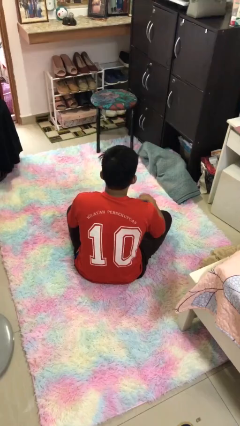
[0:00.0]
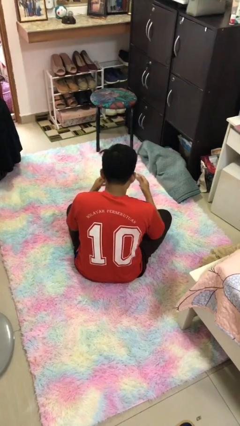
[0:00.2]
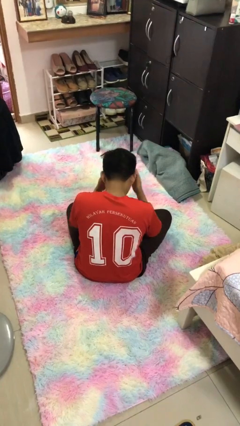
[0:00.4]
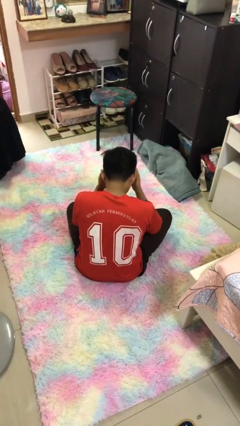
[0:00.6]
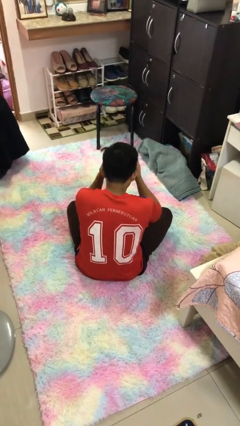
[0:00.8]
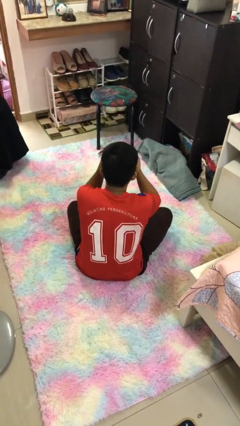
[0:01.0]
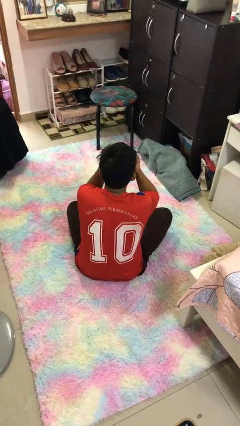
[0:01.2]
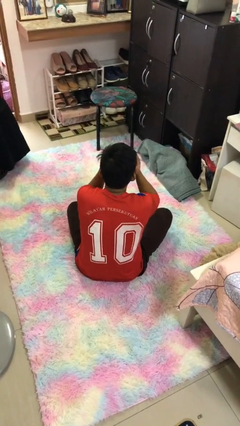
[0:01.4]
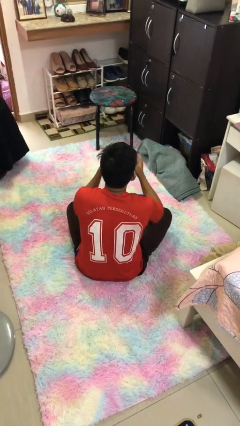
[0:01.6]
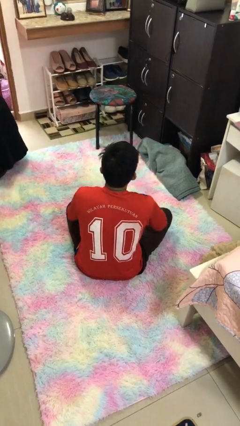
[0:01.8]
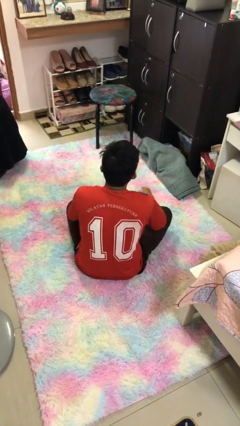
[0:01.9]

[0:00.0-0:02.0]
person covers face with hands

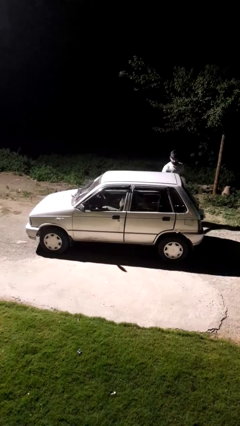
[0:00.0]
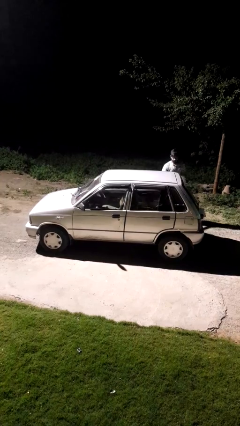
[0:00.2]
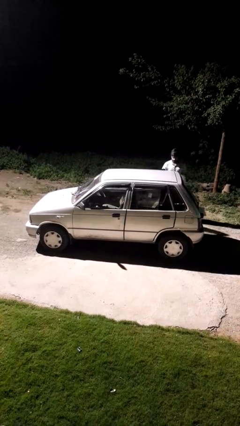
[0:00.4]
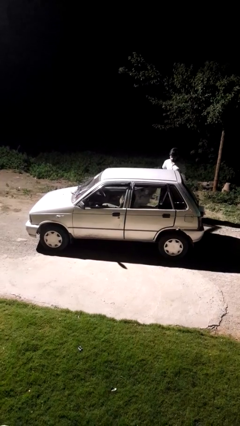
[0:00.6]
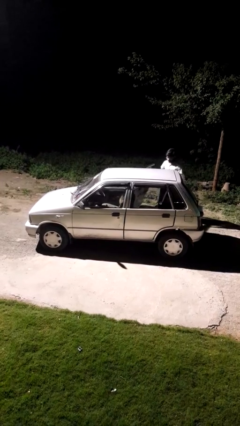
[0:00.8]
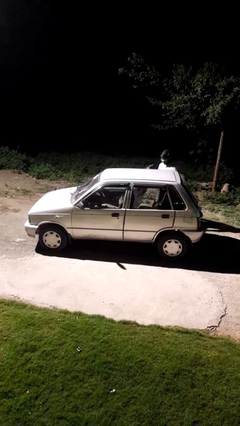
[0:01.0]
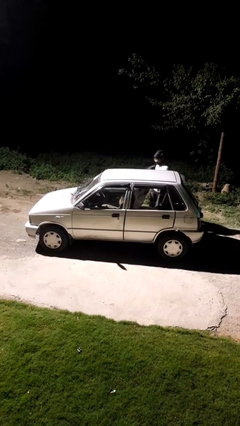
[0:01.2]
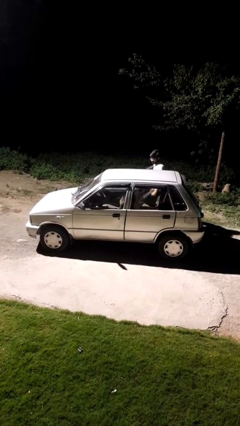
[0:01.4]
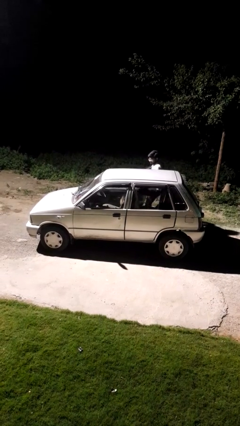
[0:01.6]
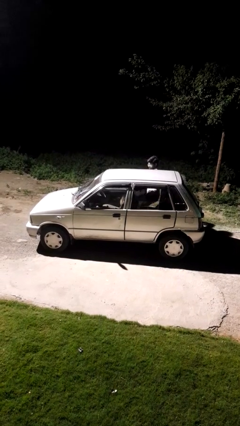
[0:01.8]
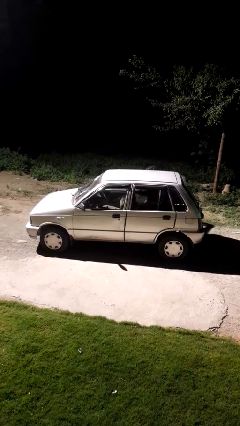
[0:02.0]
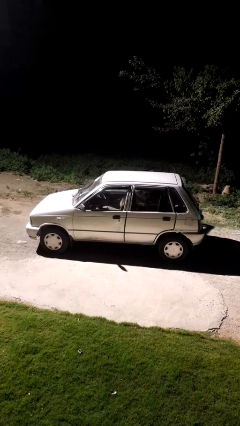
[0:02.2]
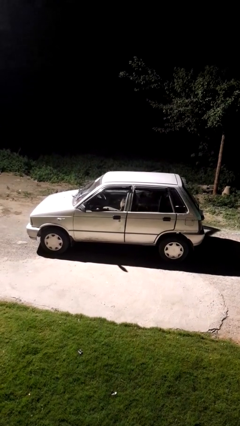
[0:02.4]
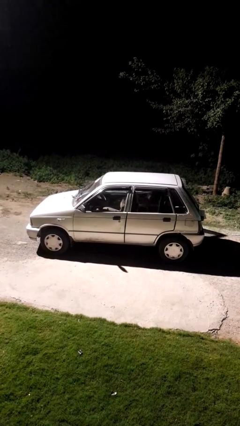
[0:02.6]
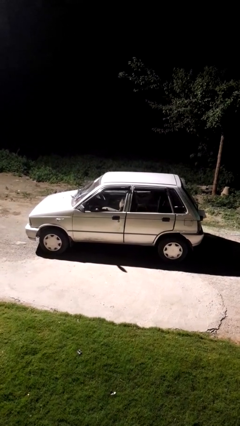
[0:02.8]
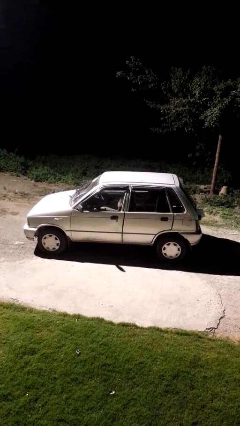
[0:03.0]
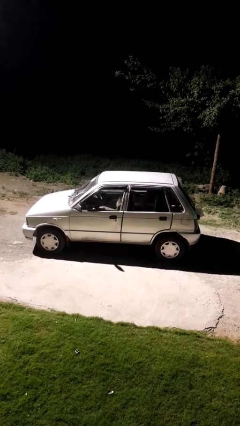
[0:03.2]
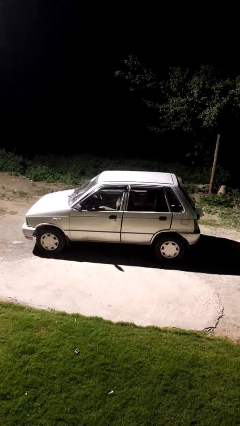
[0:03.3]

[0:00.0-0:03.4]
car picks up person

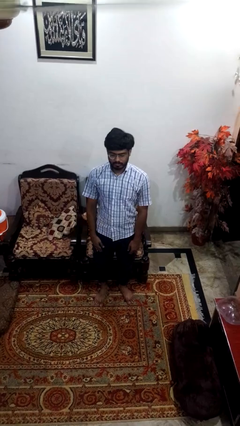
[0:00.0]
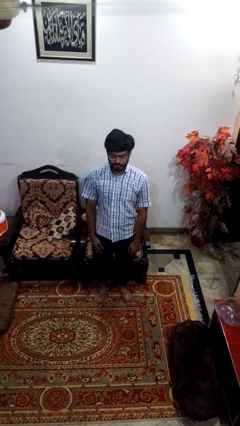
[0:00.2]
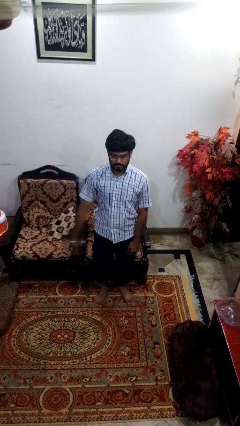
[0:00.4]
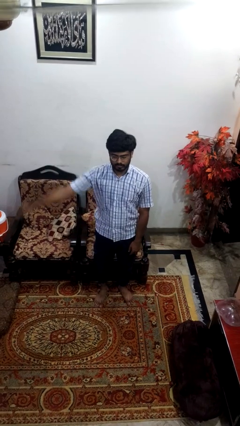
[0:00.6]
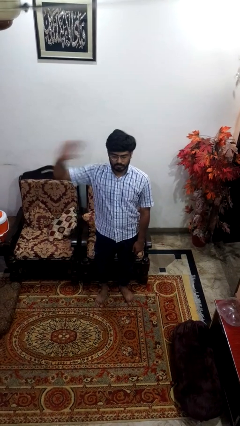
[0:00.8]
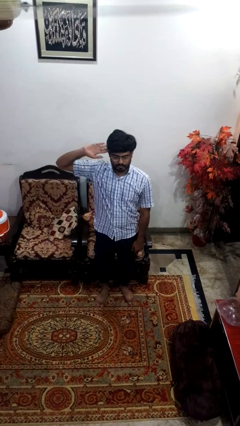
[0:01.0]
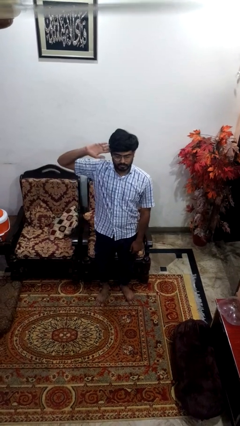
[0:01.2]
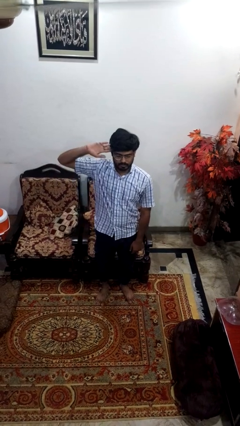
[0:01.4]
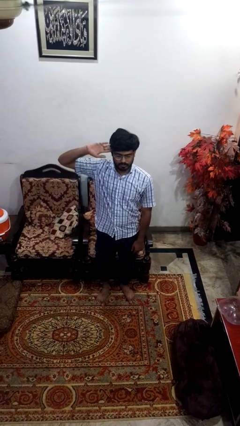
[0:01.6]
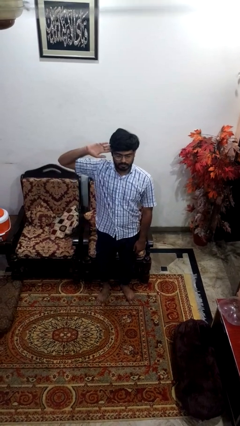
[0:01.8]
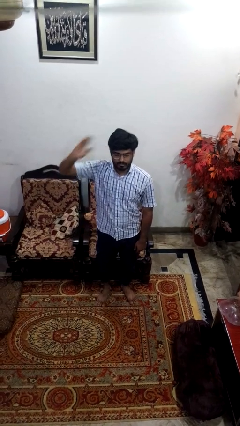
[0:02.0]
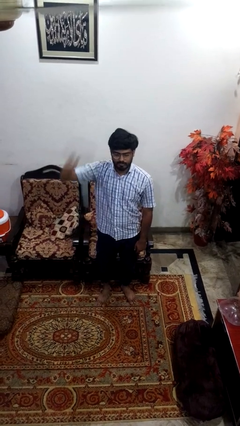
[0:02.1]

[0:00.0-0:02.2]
person salutes

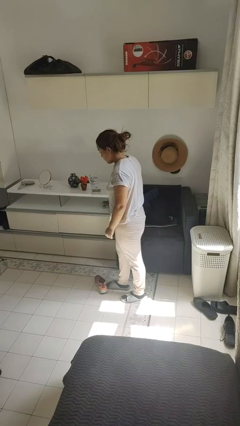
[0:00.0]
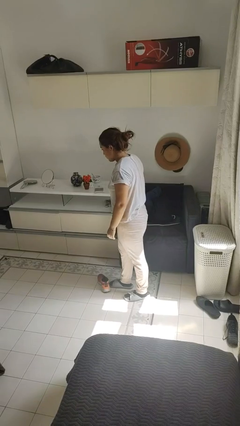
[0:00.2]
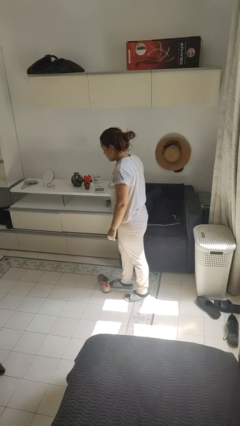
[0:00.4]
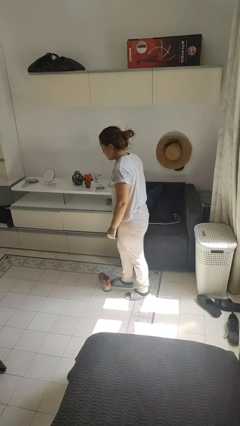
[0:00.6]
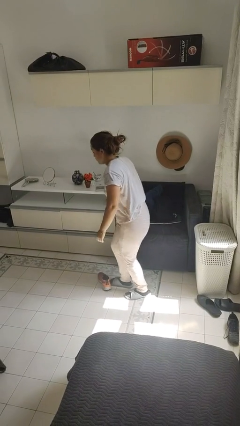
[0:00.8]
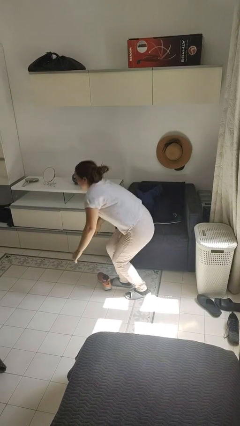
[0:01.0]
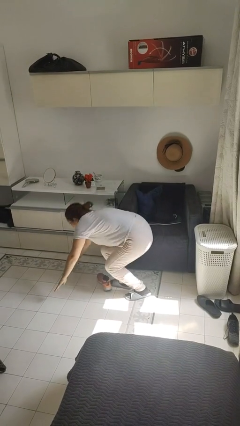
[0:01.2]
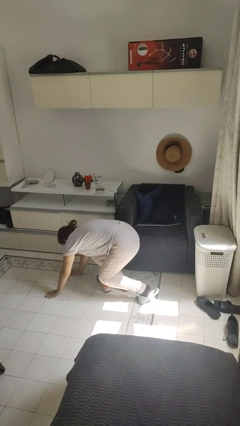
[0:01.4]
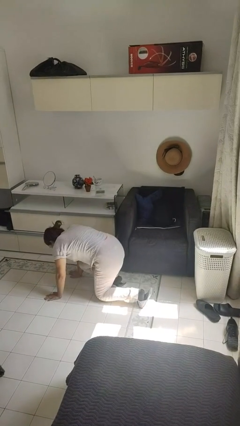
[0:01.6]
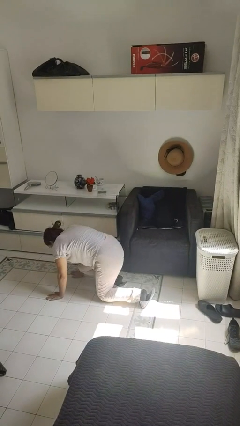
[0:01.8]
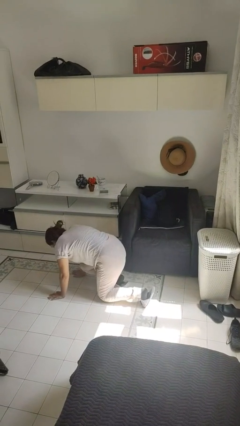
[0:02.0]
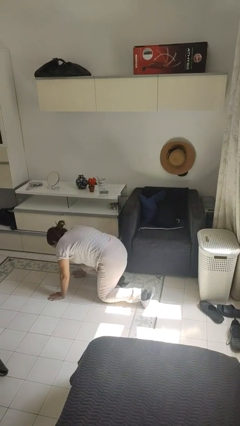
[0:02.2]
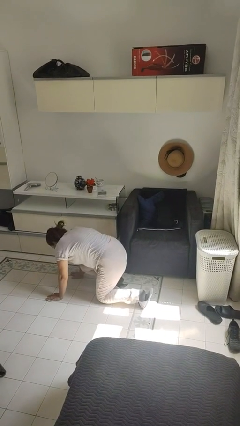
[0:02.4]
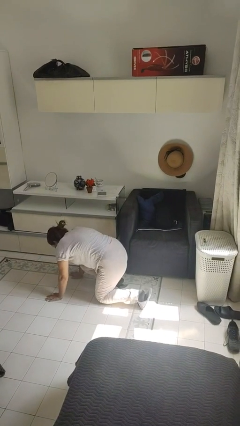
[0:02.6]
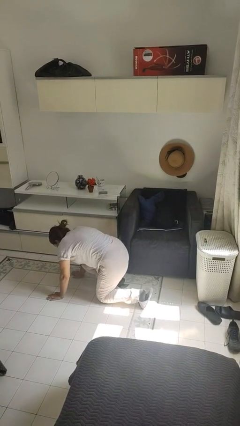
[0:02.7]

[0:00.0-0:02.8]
person trips on object on floor

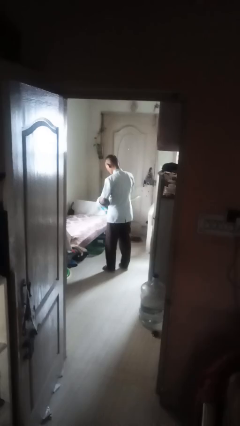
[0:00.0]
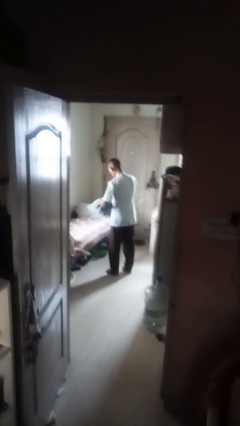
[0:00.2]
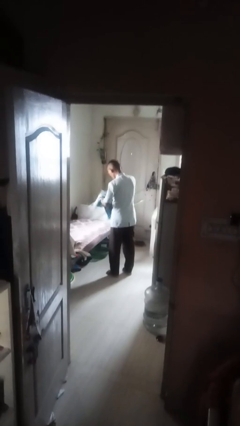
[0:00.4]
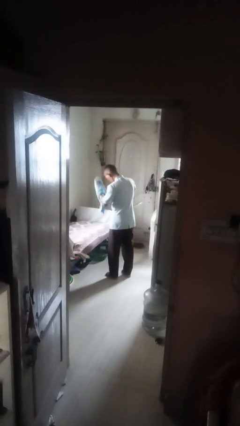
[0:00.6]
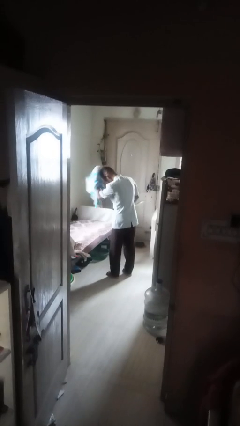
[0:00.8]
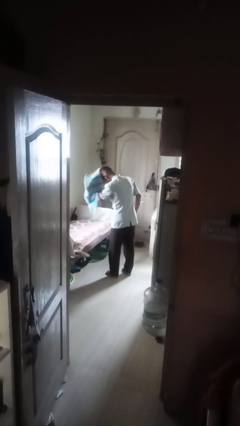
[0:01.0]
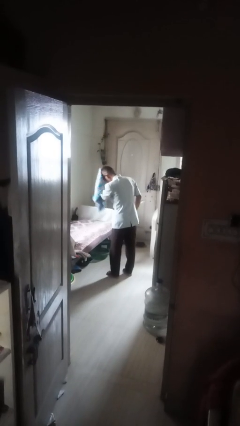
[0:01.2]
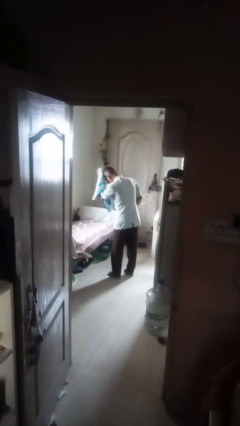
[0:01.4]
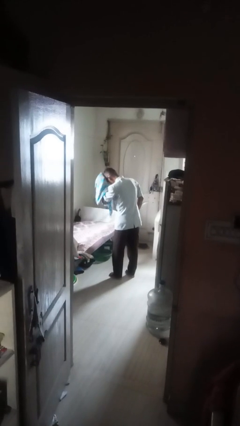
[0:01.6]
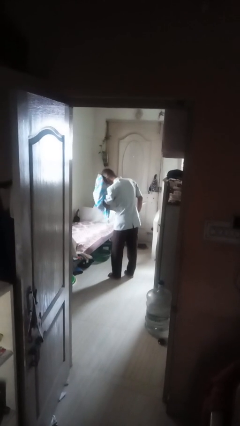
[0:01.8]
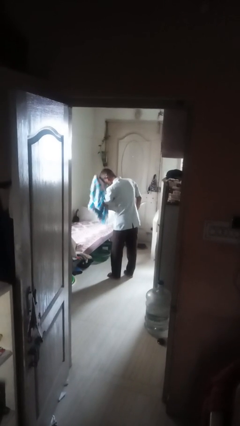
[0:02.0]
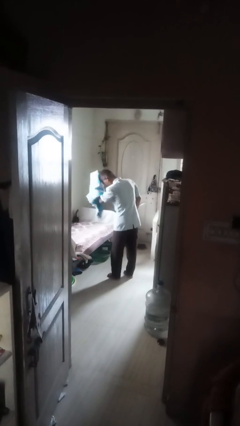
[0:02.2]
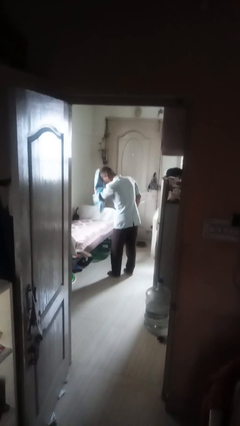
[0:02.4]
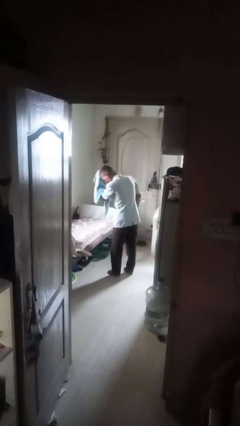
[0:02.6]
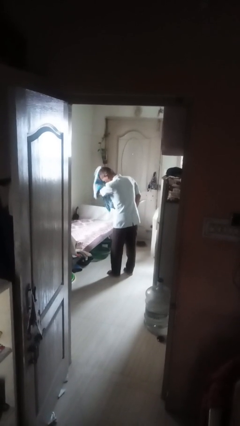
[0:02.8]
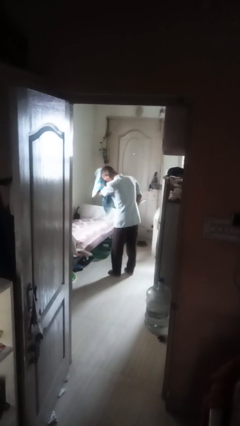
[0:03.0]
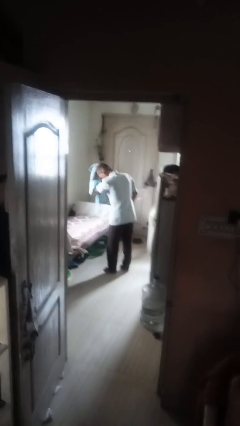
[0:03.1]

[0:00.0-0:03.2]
person dries hair with towel

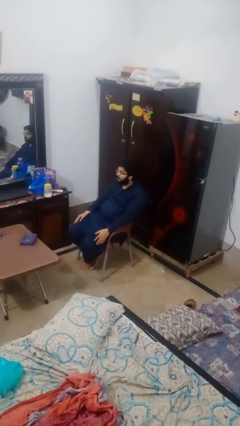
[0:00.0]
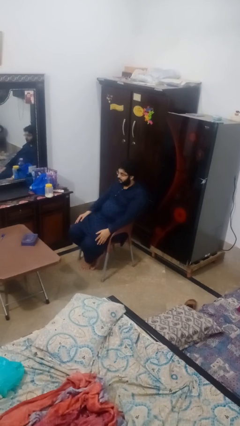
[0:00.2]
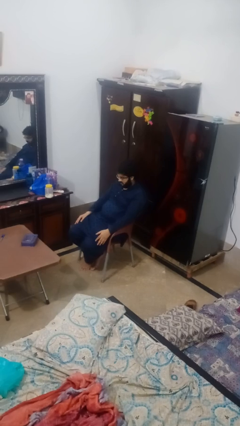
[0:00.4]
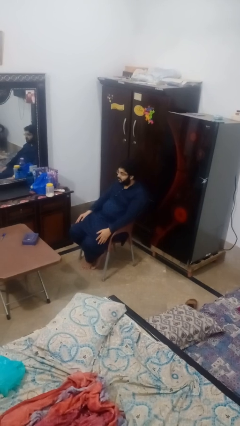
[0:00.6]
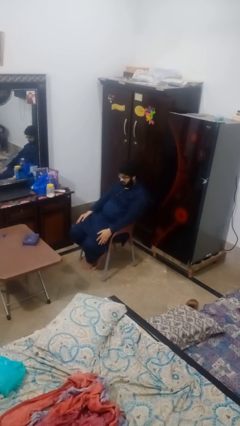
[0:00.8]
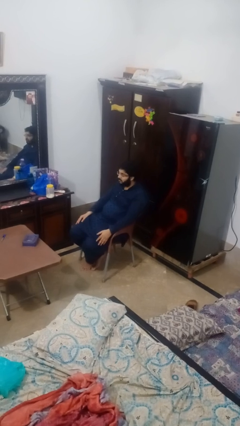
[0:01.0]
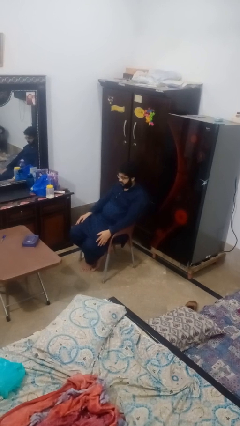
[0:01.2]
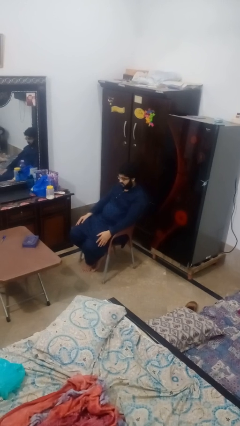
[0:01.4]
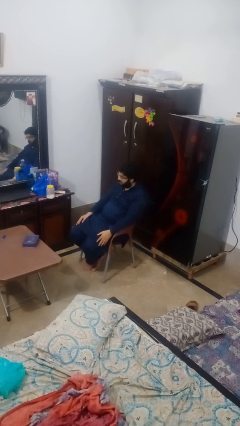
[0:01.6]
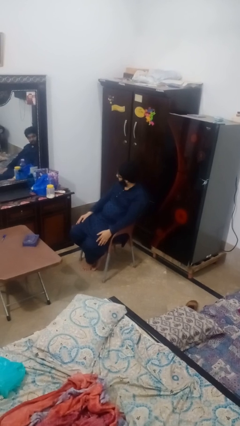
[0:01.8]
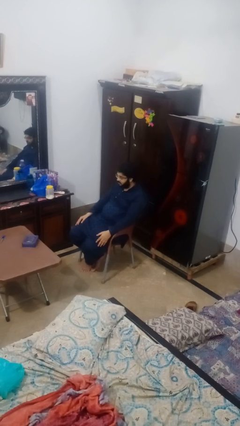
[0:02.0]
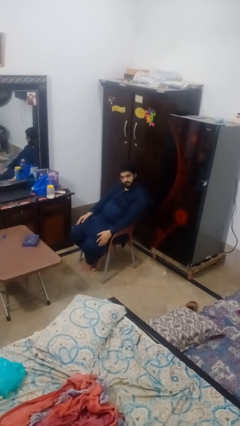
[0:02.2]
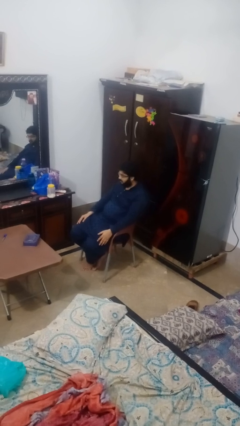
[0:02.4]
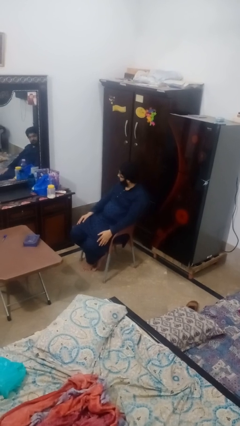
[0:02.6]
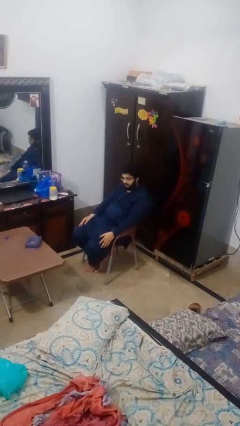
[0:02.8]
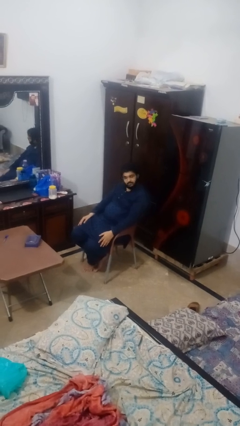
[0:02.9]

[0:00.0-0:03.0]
person nods head

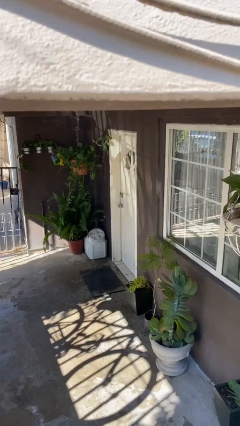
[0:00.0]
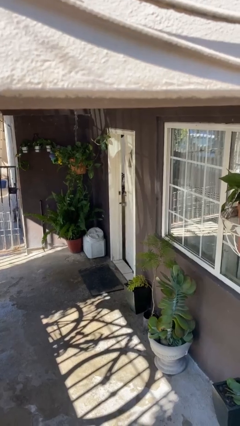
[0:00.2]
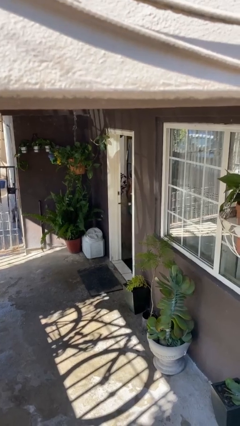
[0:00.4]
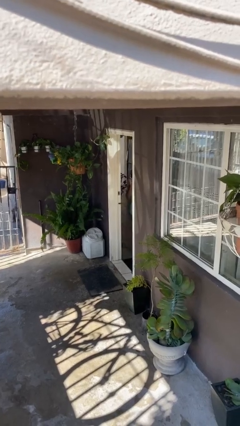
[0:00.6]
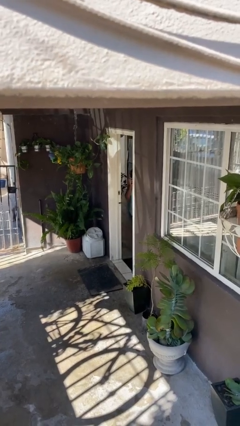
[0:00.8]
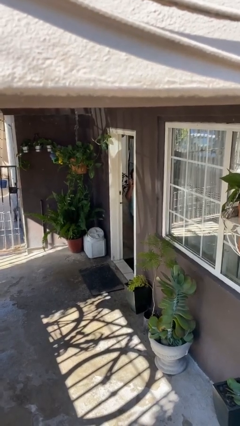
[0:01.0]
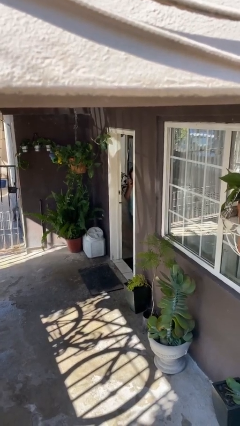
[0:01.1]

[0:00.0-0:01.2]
person opens facility door
